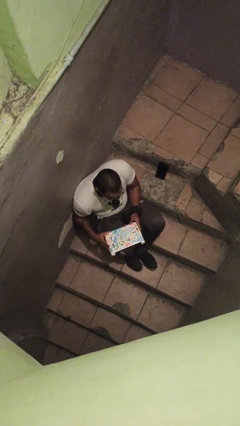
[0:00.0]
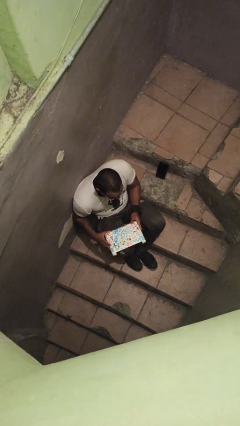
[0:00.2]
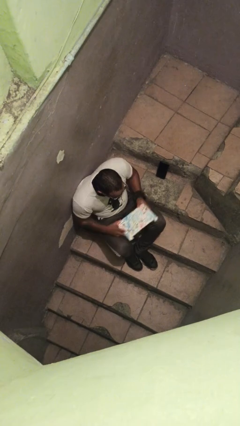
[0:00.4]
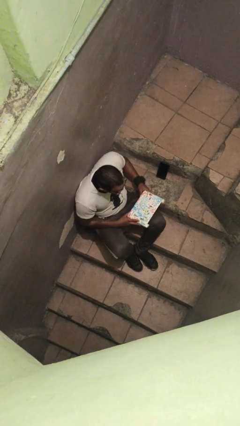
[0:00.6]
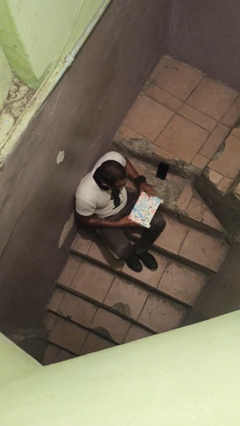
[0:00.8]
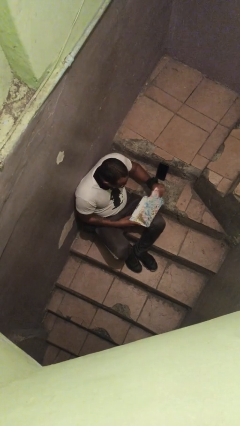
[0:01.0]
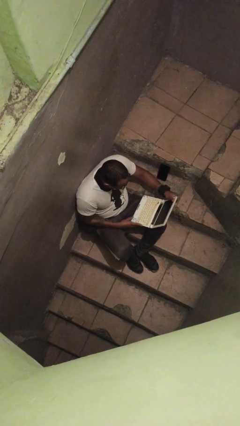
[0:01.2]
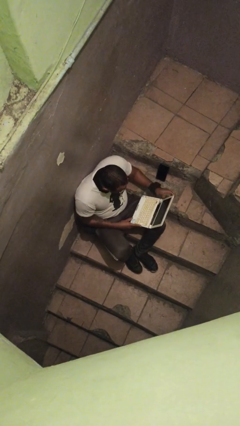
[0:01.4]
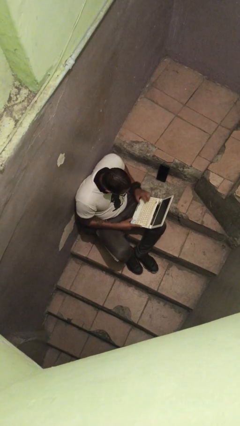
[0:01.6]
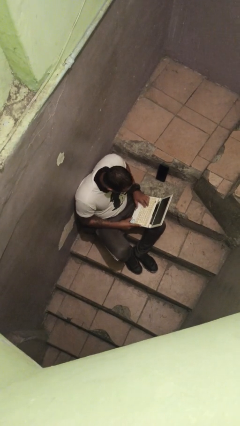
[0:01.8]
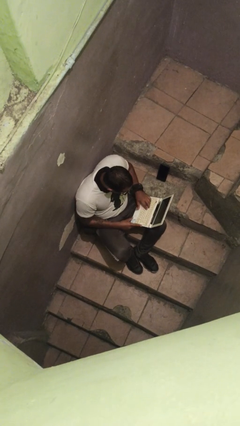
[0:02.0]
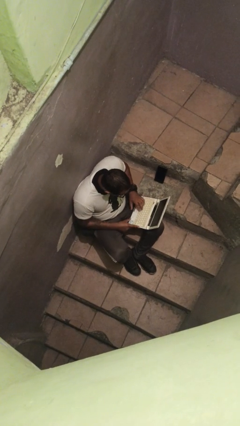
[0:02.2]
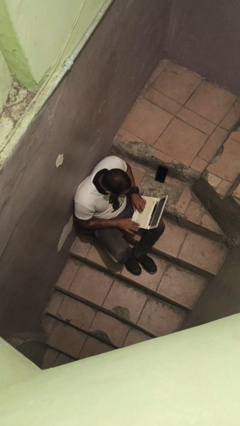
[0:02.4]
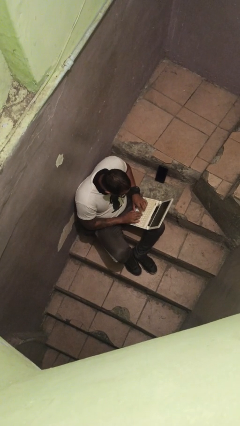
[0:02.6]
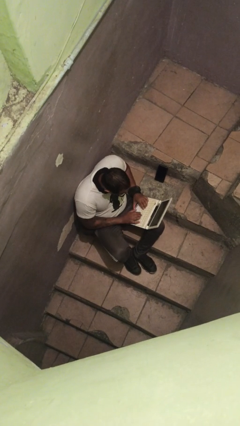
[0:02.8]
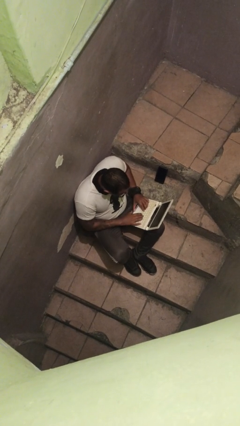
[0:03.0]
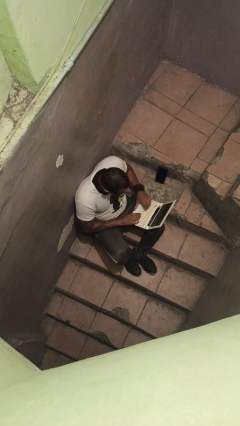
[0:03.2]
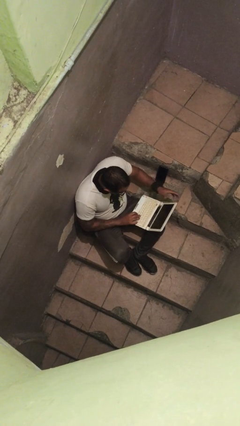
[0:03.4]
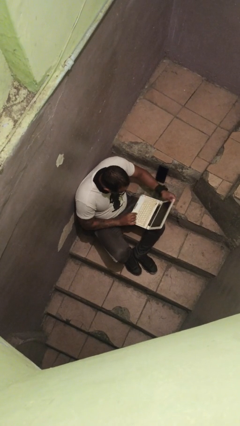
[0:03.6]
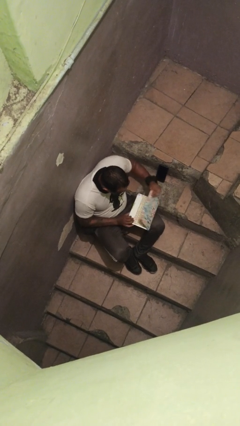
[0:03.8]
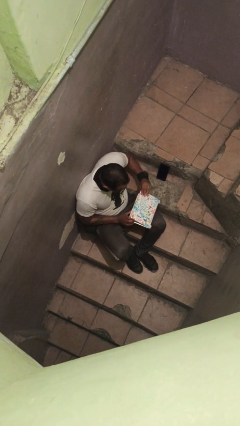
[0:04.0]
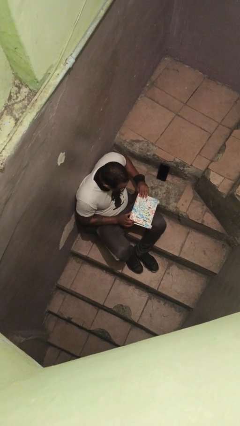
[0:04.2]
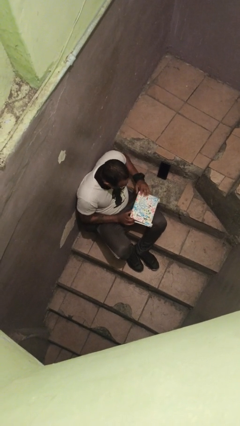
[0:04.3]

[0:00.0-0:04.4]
person interacts with laptop

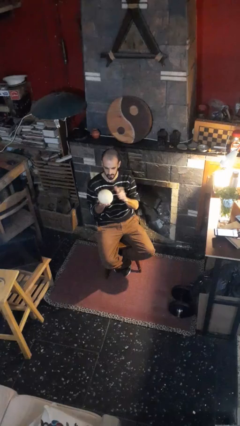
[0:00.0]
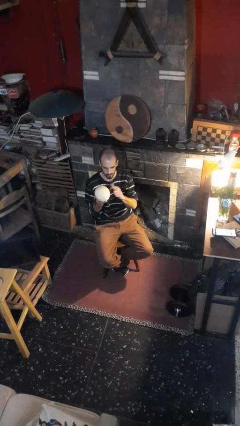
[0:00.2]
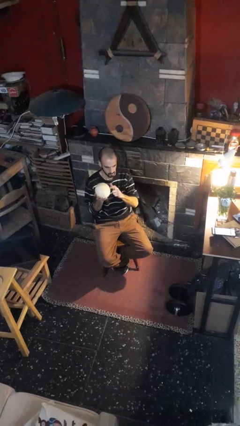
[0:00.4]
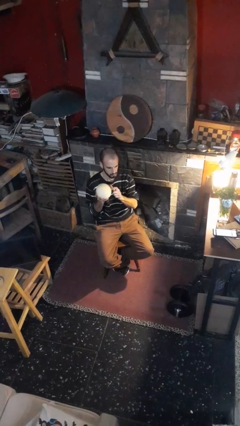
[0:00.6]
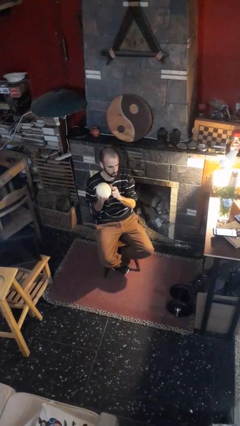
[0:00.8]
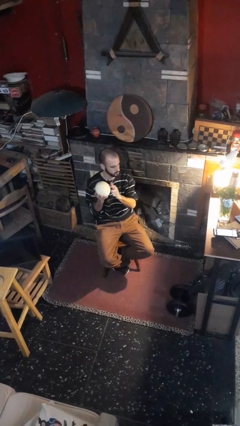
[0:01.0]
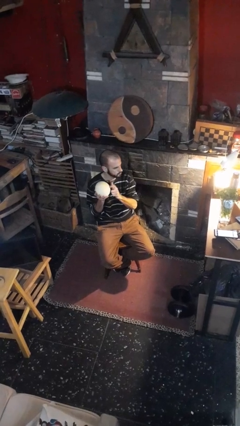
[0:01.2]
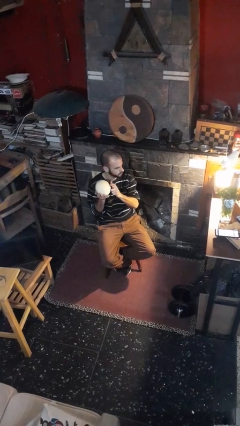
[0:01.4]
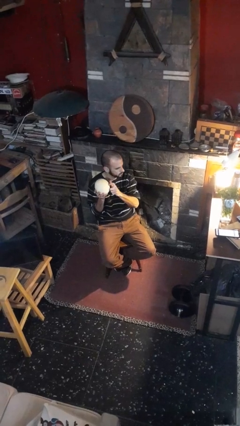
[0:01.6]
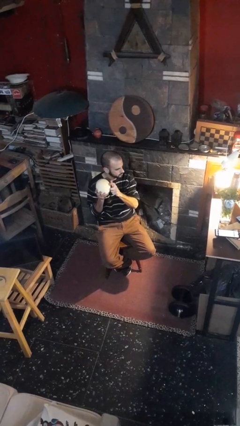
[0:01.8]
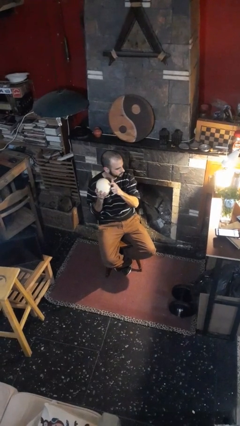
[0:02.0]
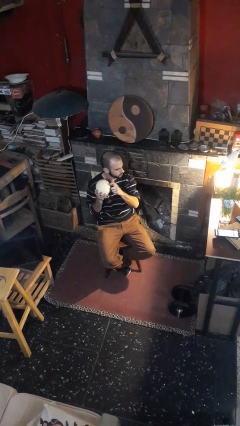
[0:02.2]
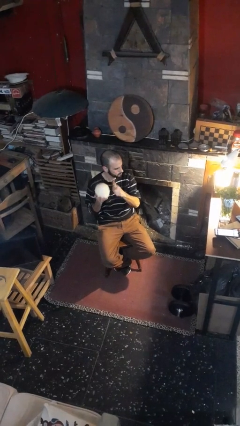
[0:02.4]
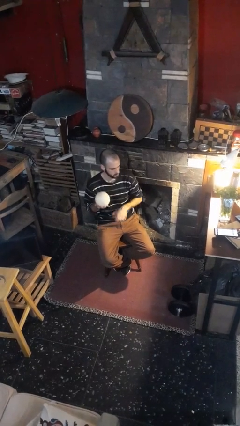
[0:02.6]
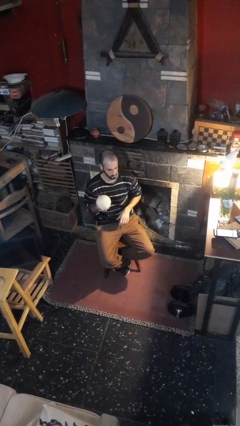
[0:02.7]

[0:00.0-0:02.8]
person taps object with finger

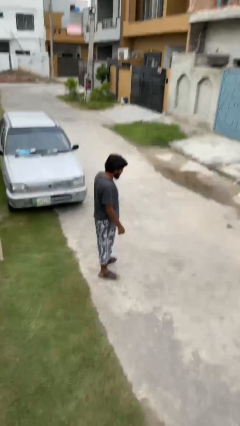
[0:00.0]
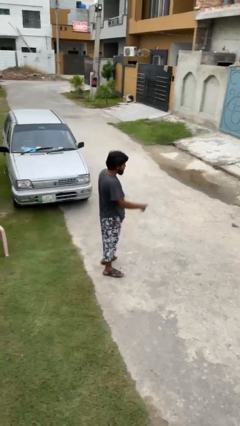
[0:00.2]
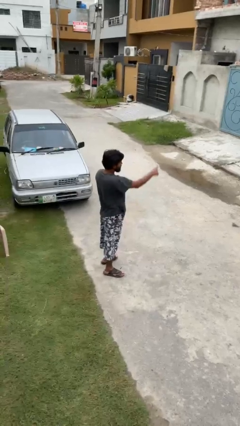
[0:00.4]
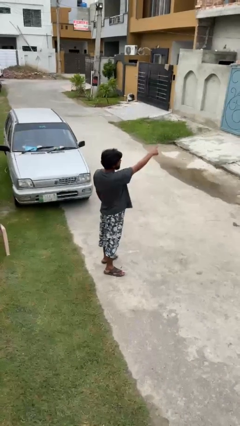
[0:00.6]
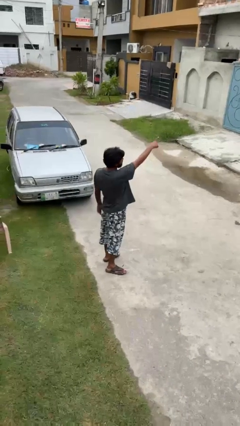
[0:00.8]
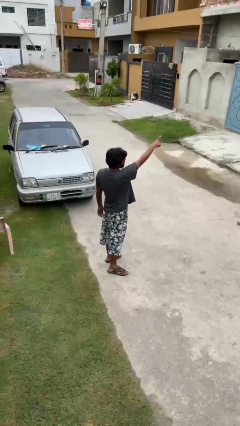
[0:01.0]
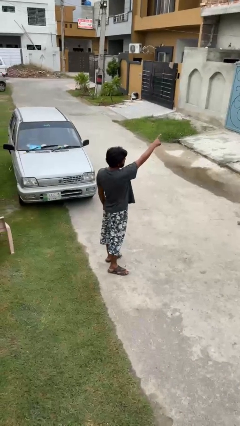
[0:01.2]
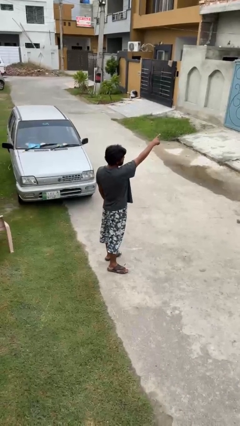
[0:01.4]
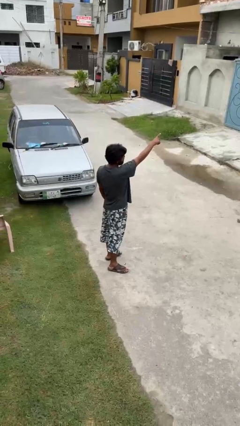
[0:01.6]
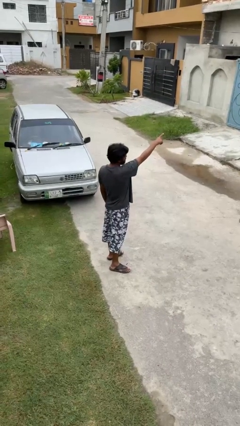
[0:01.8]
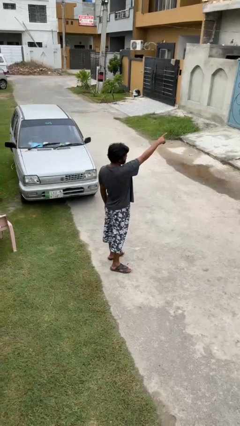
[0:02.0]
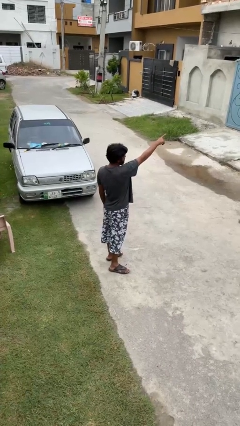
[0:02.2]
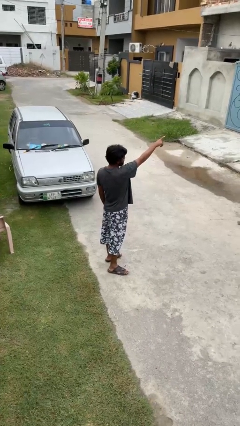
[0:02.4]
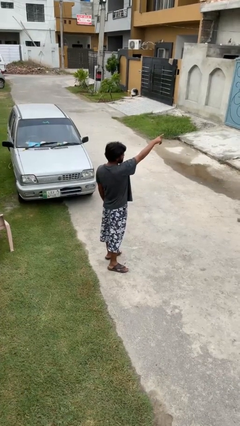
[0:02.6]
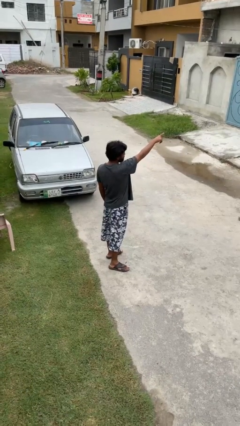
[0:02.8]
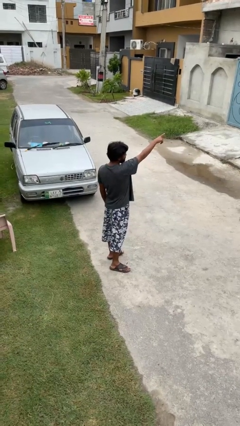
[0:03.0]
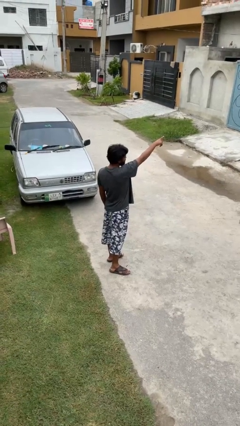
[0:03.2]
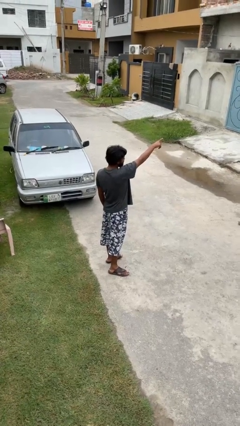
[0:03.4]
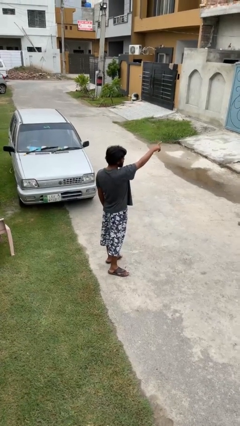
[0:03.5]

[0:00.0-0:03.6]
person points at person

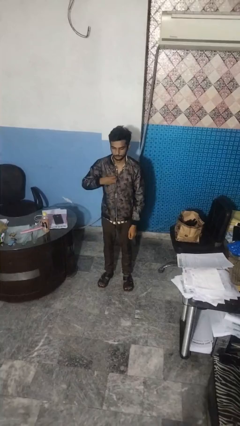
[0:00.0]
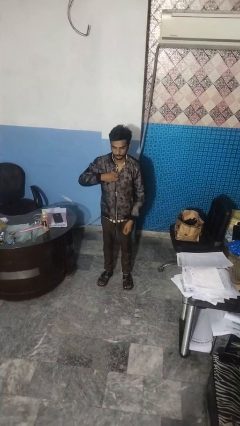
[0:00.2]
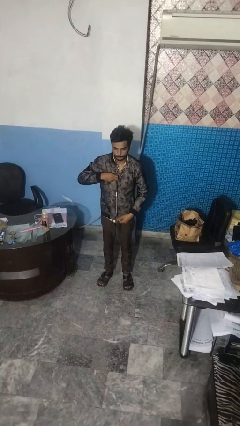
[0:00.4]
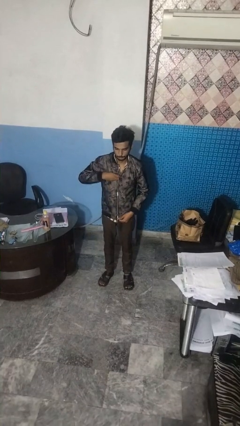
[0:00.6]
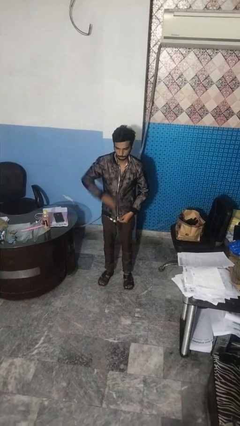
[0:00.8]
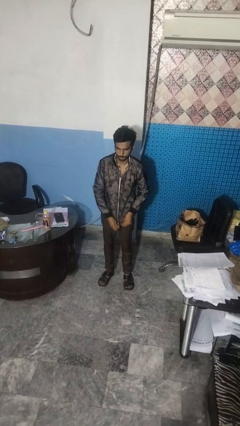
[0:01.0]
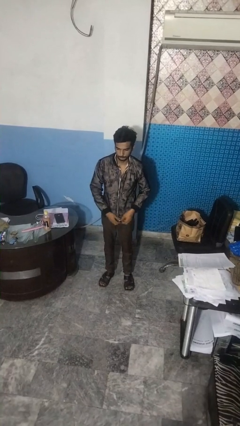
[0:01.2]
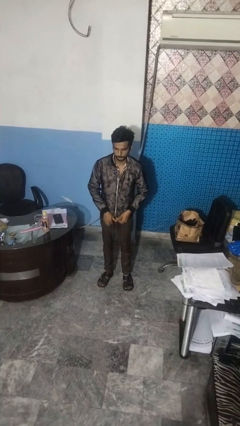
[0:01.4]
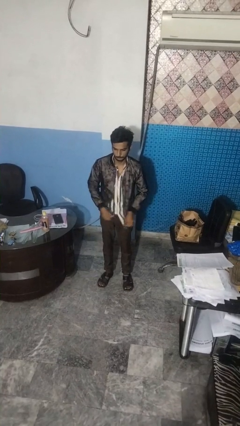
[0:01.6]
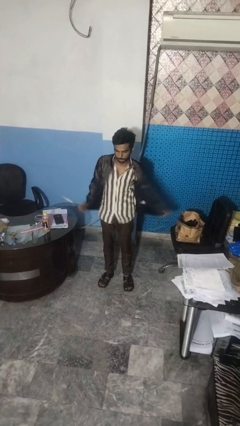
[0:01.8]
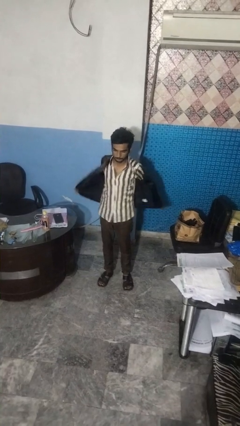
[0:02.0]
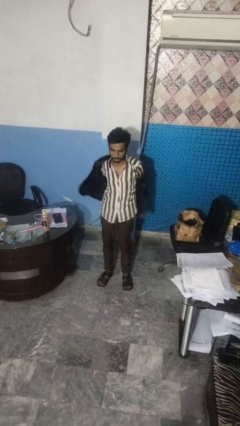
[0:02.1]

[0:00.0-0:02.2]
person unzips jacket

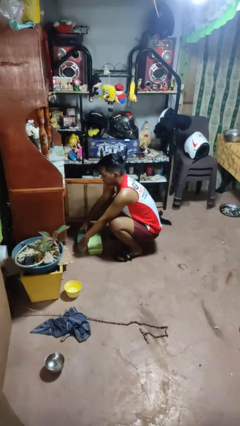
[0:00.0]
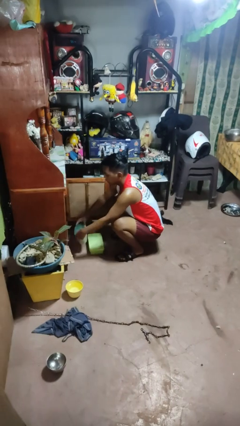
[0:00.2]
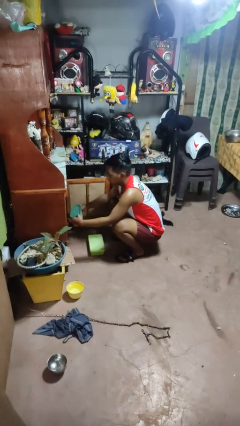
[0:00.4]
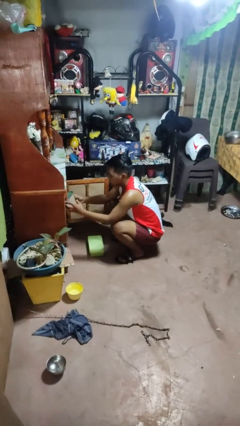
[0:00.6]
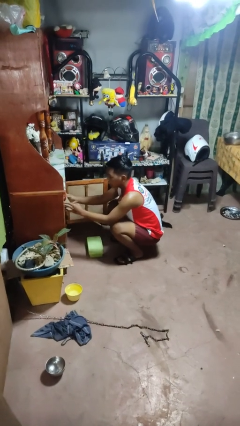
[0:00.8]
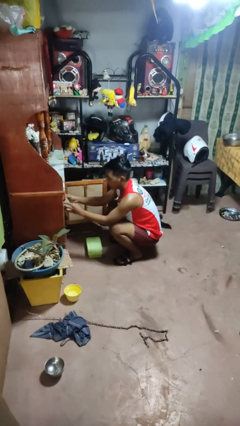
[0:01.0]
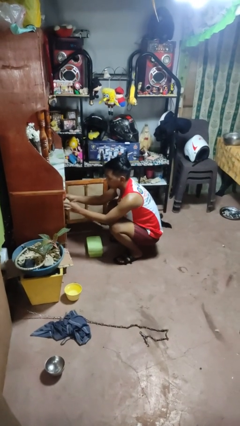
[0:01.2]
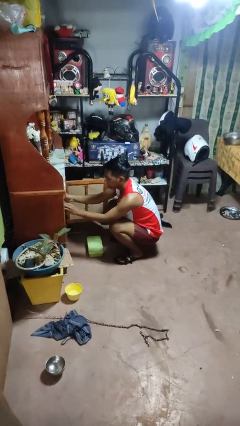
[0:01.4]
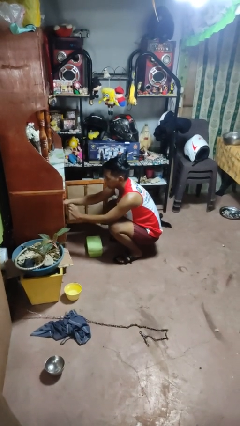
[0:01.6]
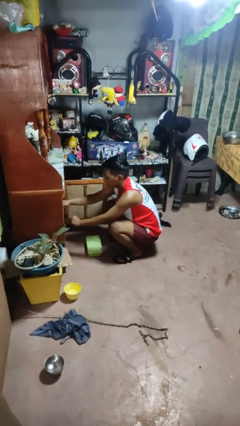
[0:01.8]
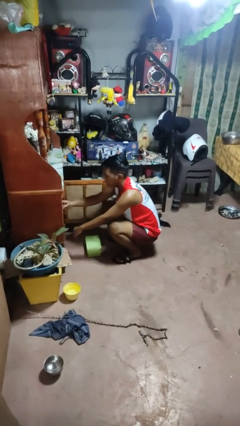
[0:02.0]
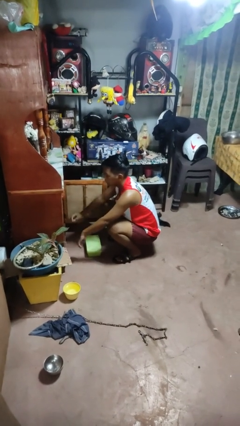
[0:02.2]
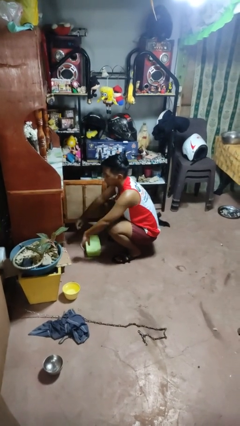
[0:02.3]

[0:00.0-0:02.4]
person puts object in cabinet

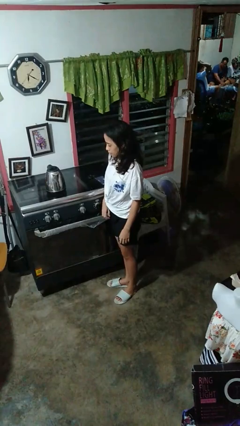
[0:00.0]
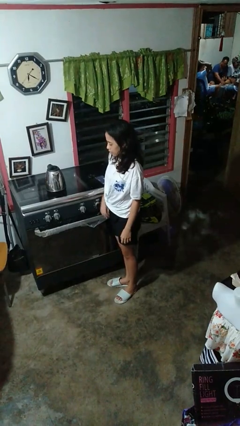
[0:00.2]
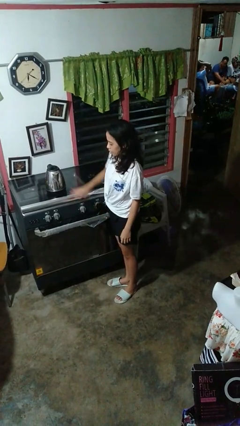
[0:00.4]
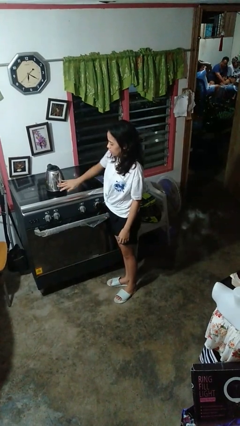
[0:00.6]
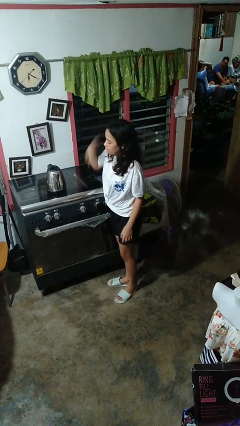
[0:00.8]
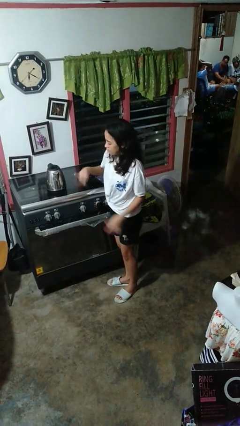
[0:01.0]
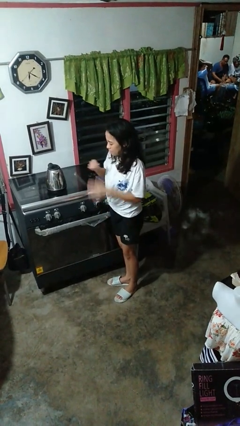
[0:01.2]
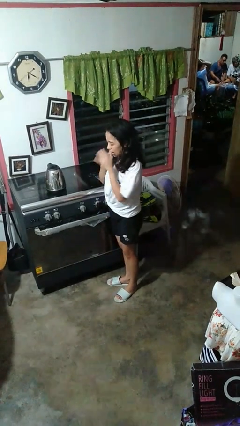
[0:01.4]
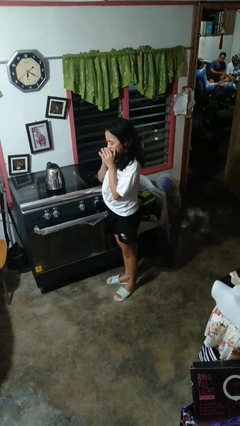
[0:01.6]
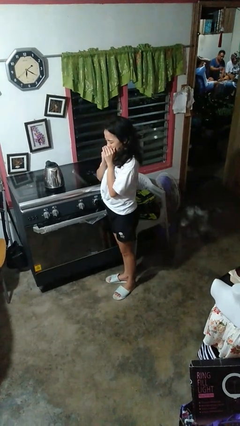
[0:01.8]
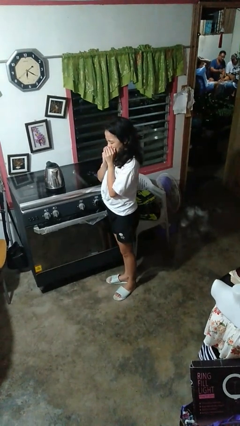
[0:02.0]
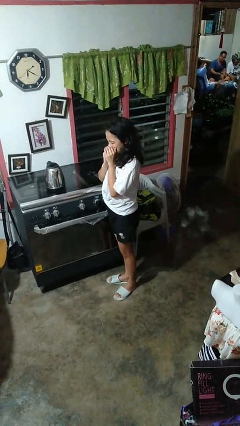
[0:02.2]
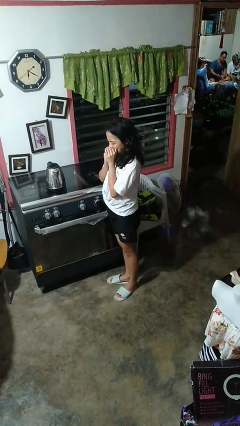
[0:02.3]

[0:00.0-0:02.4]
person burns hand
